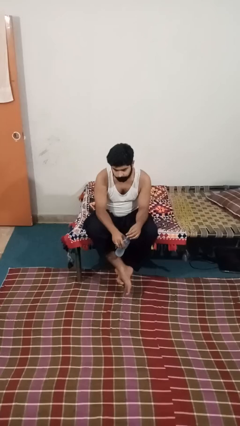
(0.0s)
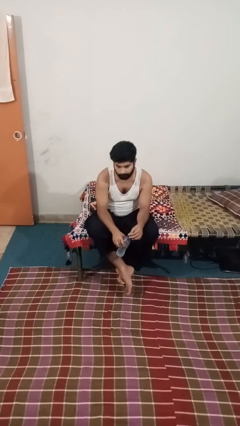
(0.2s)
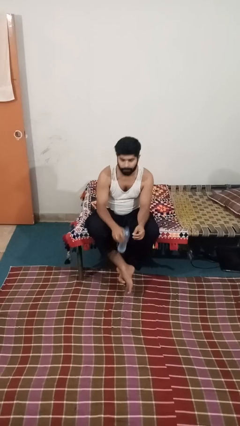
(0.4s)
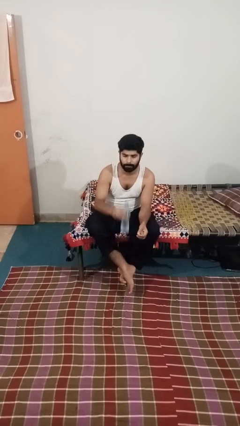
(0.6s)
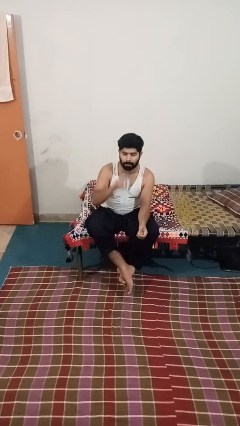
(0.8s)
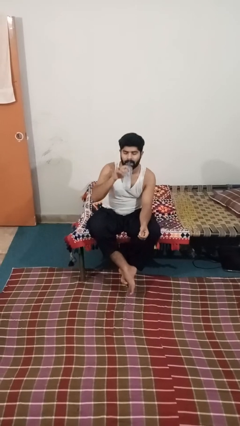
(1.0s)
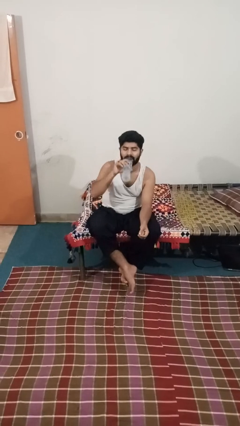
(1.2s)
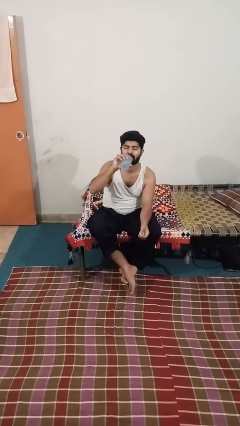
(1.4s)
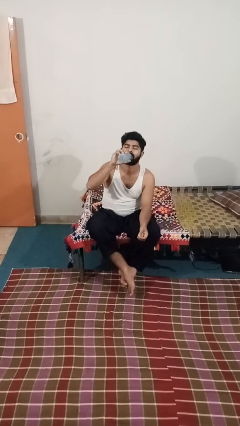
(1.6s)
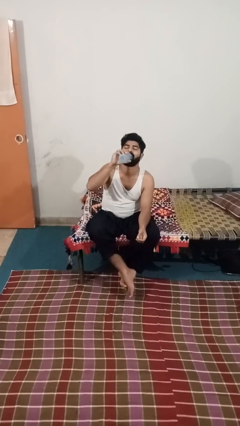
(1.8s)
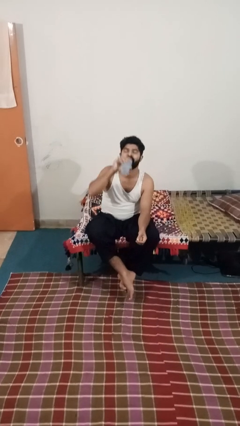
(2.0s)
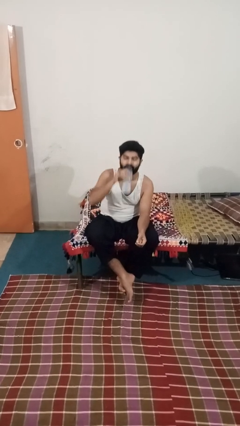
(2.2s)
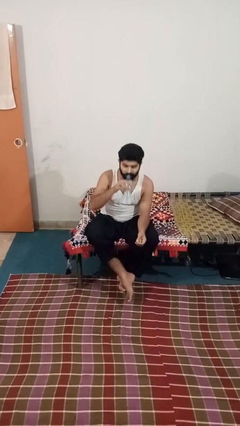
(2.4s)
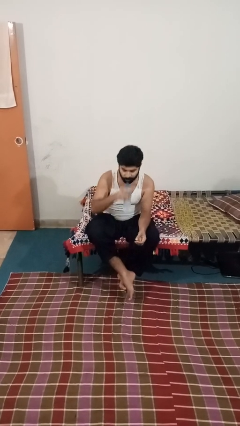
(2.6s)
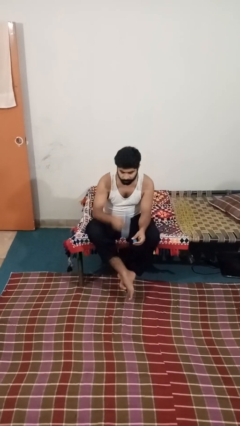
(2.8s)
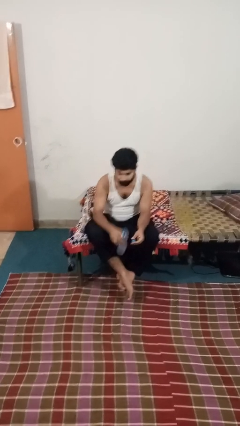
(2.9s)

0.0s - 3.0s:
person drinks from bottle

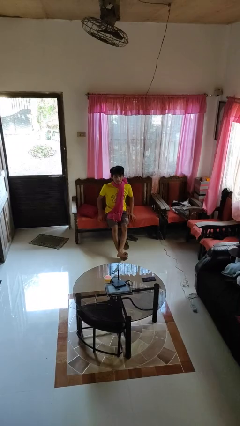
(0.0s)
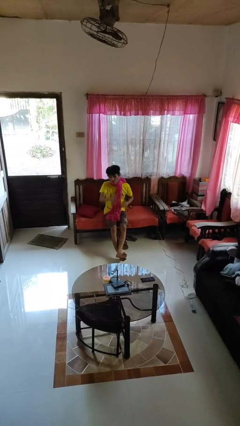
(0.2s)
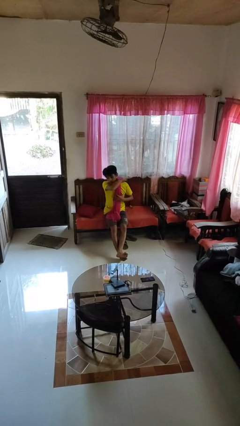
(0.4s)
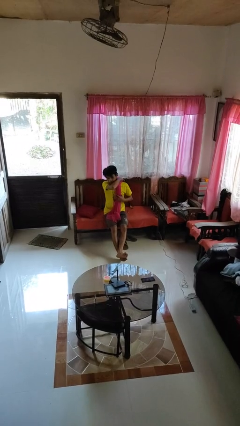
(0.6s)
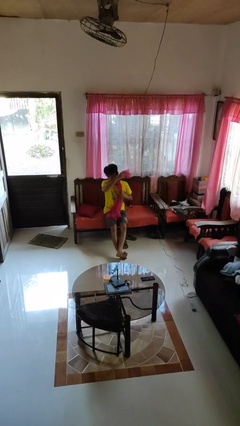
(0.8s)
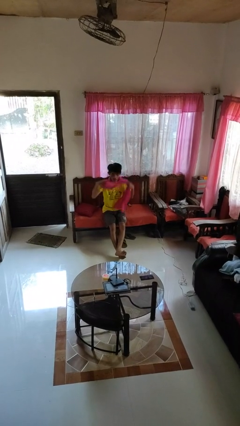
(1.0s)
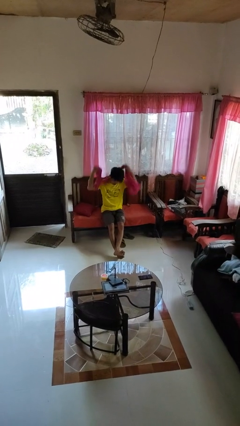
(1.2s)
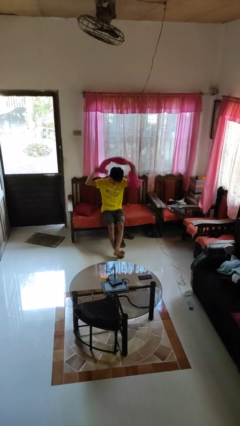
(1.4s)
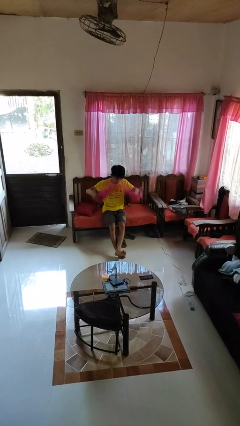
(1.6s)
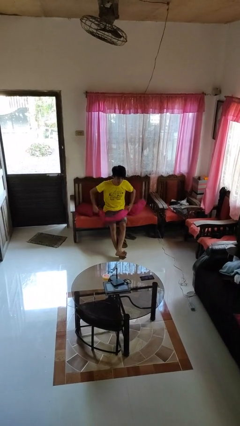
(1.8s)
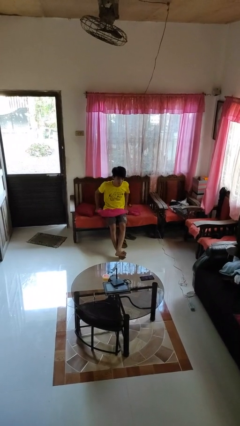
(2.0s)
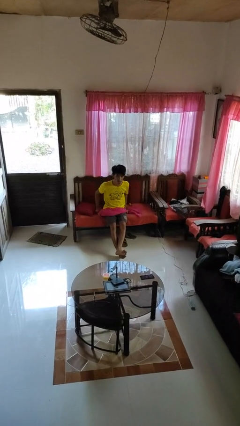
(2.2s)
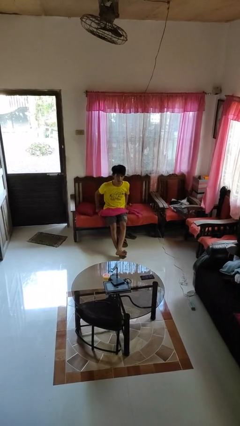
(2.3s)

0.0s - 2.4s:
person takes off scarf

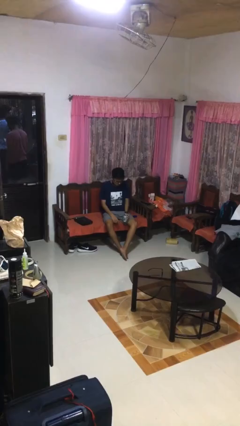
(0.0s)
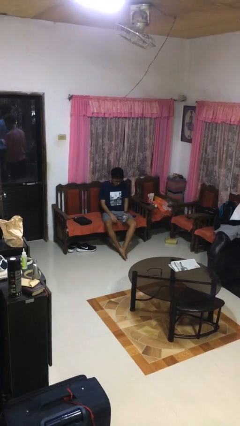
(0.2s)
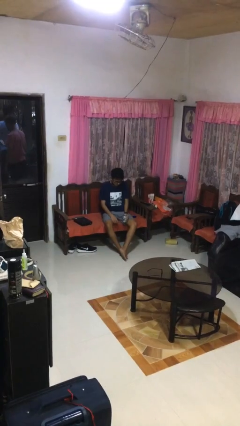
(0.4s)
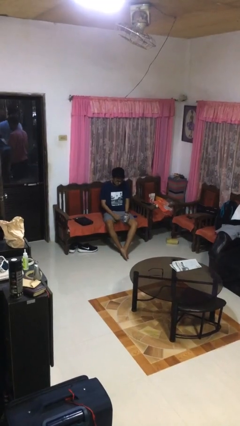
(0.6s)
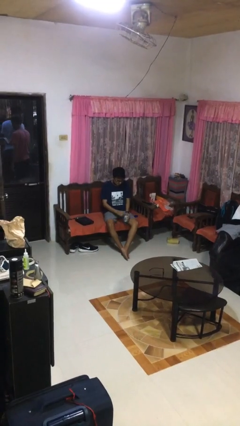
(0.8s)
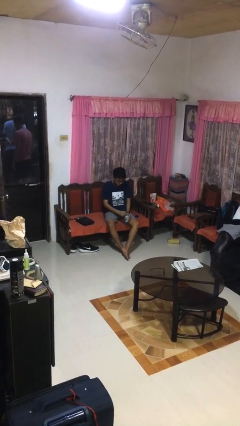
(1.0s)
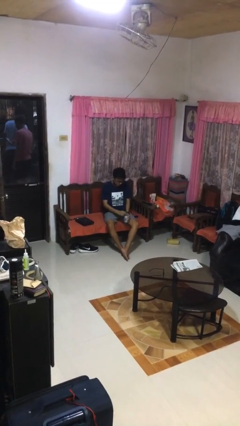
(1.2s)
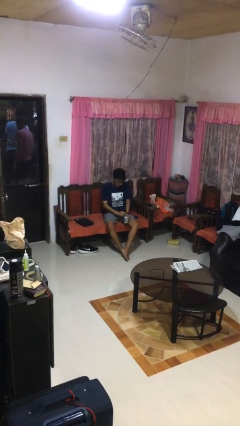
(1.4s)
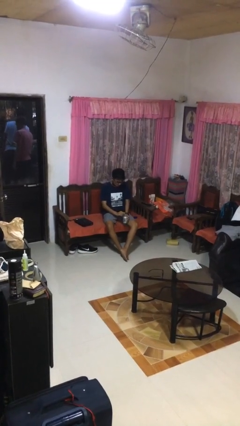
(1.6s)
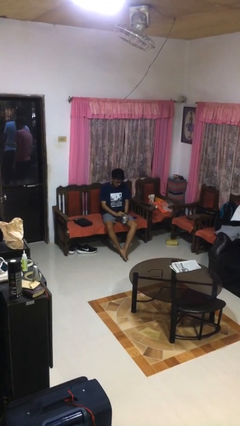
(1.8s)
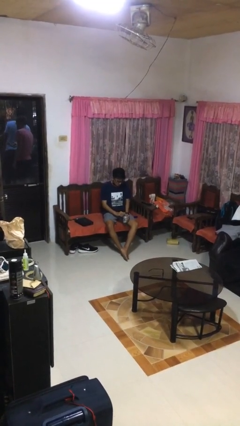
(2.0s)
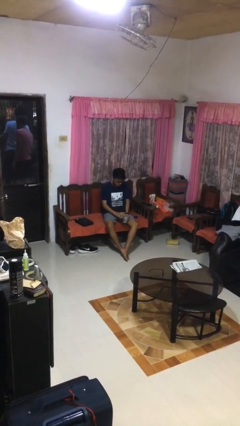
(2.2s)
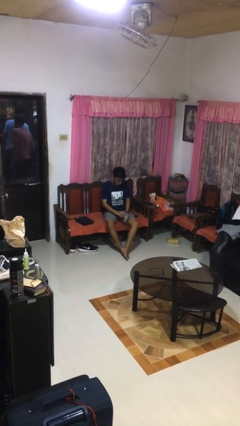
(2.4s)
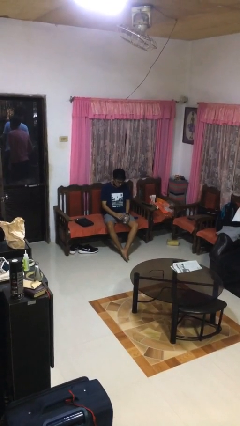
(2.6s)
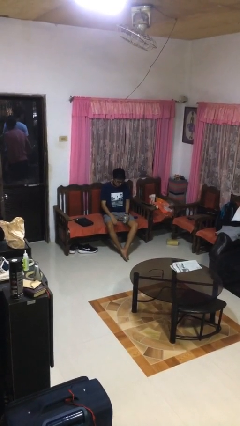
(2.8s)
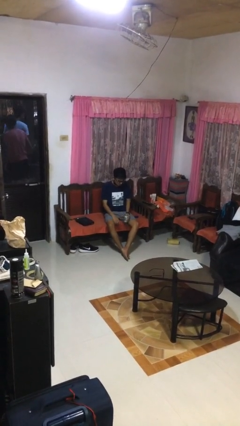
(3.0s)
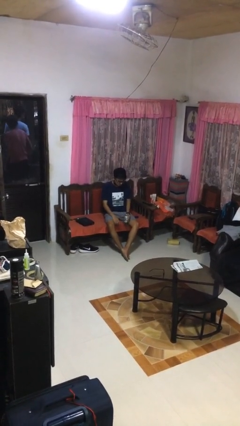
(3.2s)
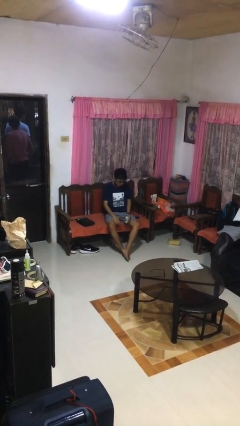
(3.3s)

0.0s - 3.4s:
person opens beverage can

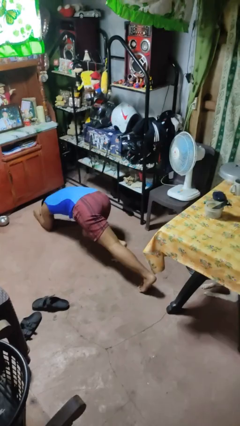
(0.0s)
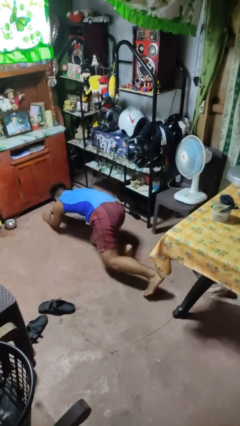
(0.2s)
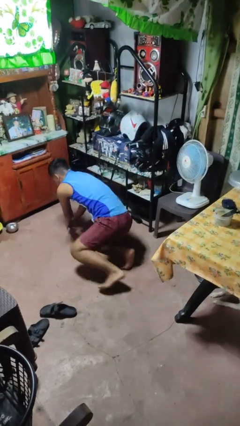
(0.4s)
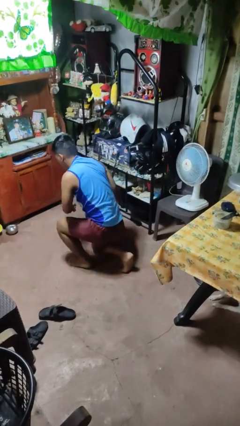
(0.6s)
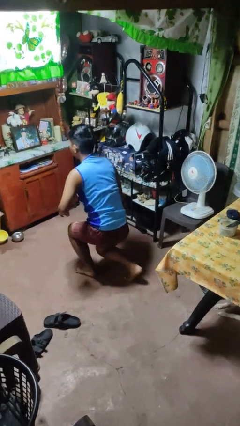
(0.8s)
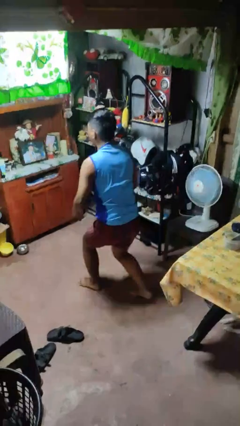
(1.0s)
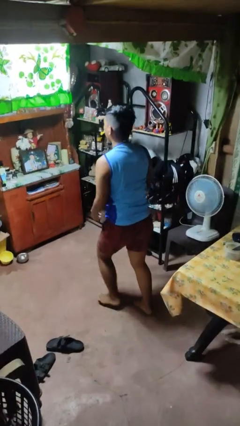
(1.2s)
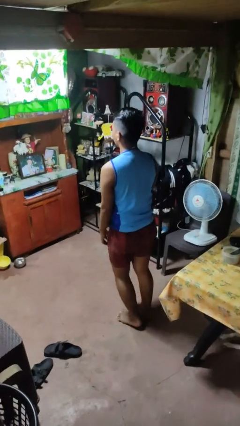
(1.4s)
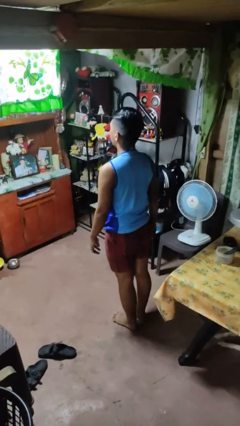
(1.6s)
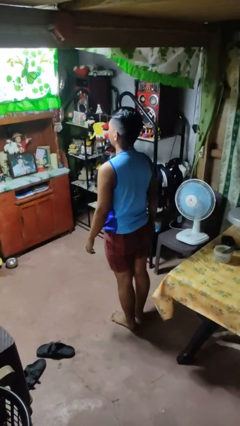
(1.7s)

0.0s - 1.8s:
person stands up from floor

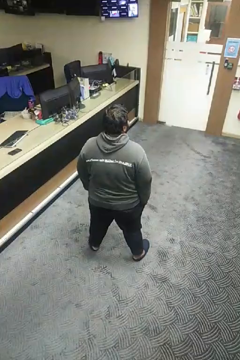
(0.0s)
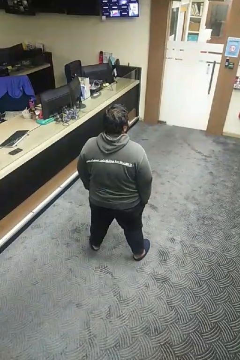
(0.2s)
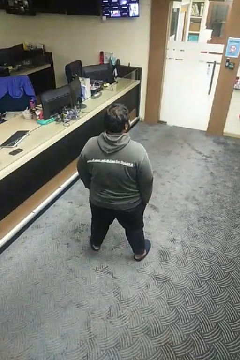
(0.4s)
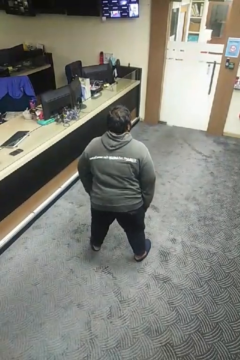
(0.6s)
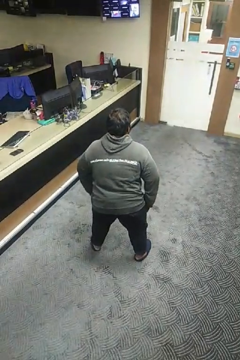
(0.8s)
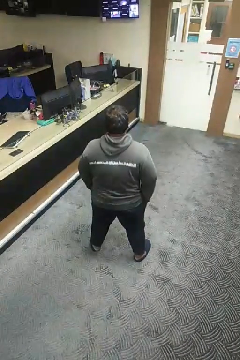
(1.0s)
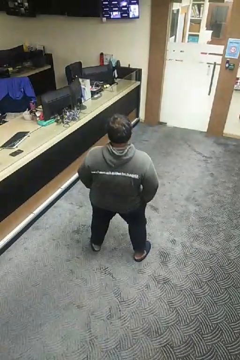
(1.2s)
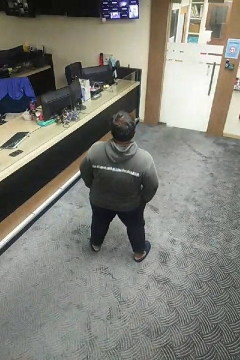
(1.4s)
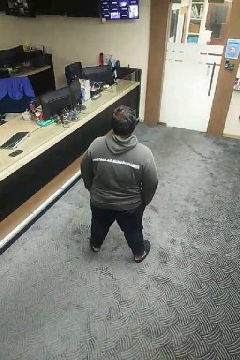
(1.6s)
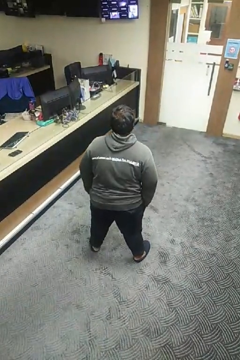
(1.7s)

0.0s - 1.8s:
person wiggles hips

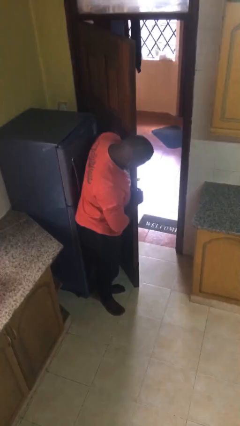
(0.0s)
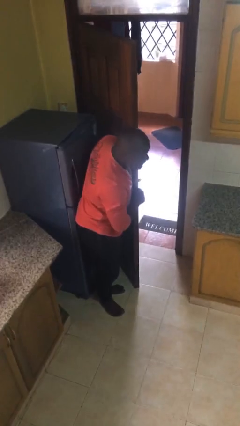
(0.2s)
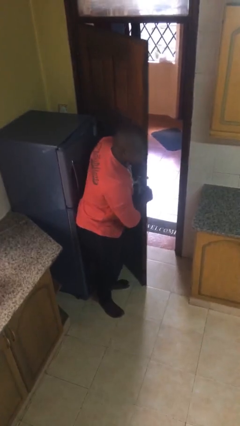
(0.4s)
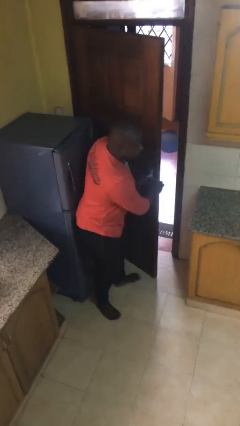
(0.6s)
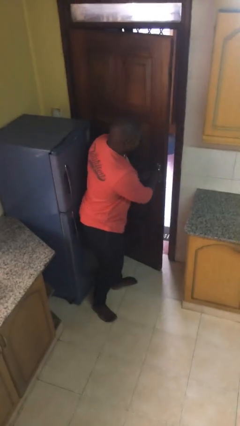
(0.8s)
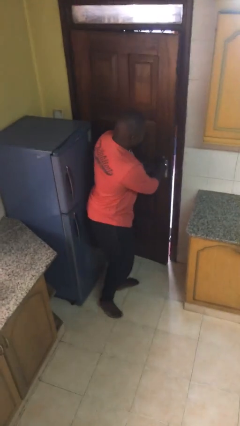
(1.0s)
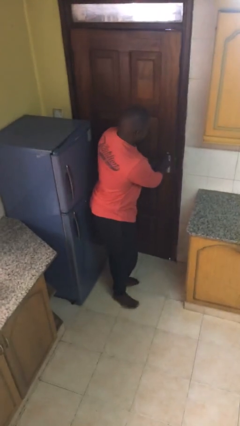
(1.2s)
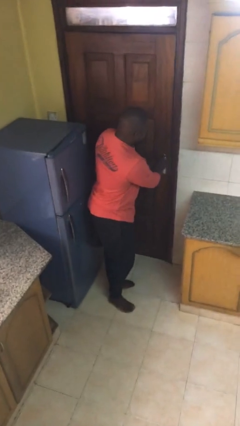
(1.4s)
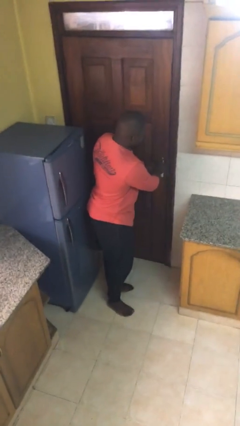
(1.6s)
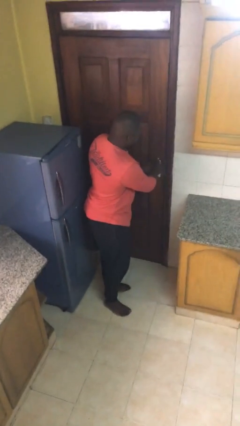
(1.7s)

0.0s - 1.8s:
person closes facility door

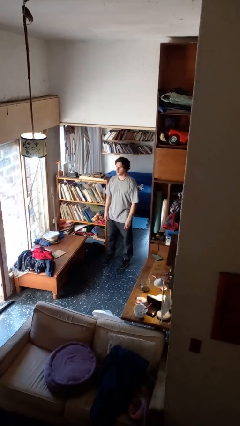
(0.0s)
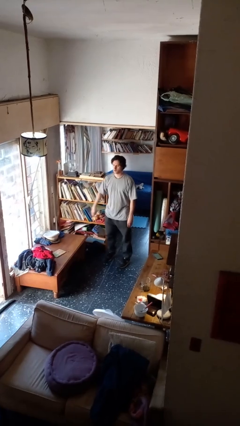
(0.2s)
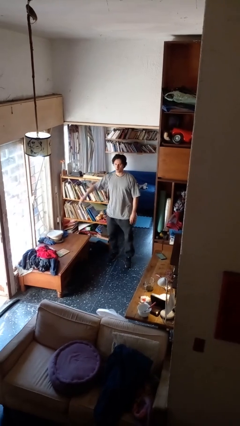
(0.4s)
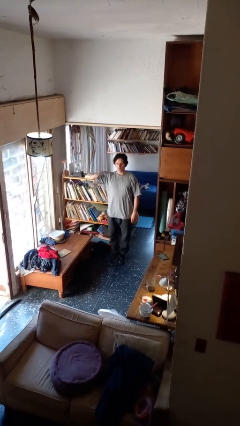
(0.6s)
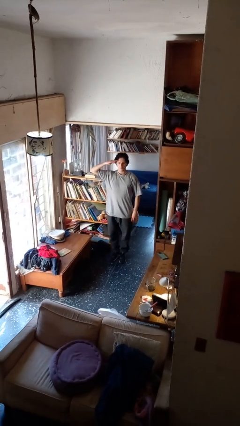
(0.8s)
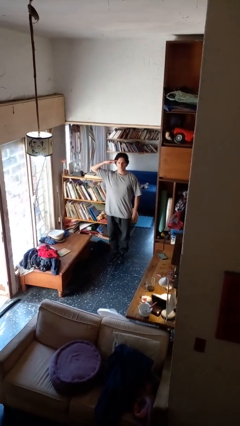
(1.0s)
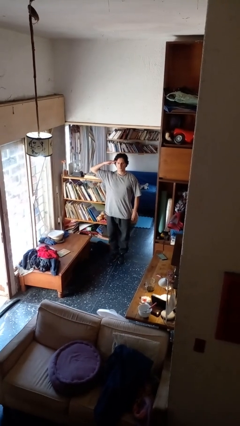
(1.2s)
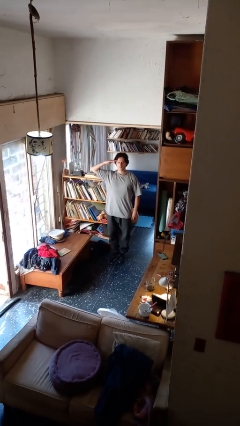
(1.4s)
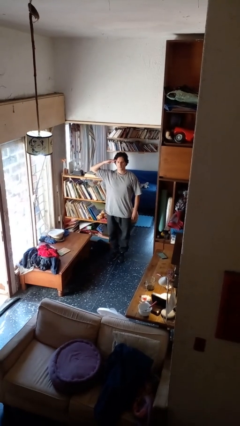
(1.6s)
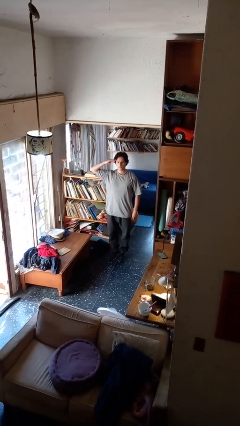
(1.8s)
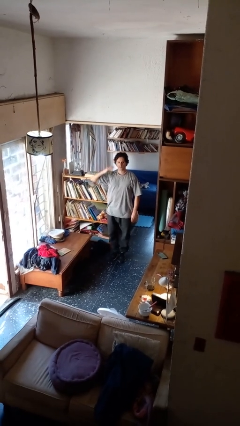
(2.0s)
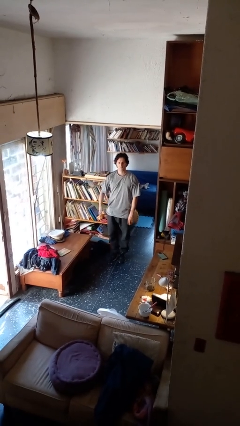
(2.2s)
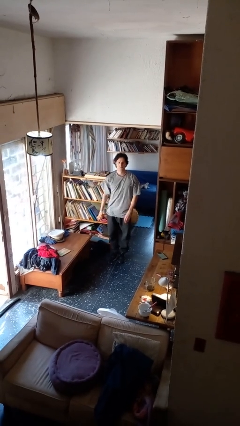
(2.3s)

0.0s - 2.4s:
person salutes

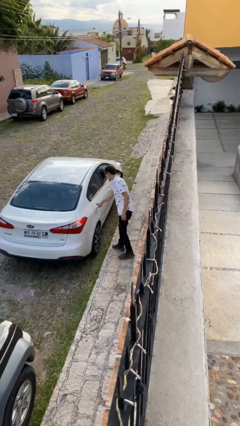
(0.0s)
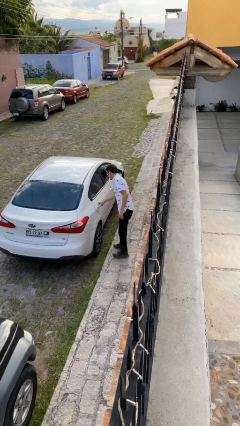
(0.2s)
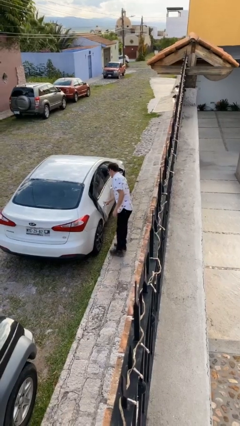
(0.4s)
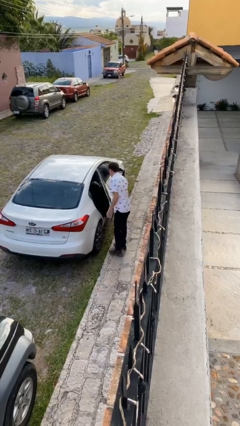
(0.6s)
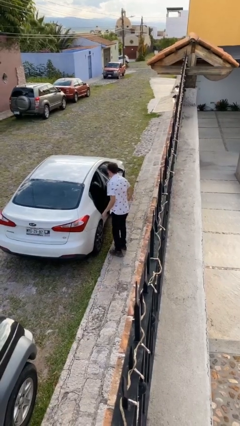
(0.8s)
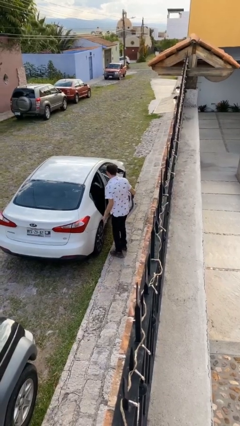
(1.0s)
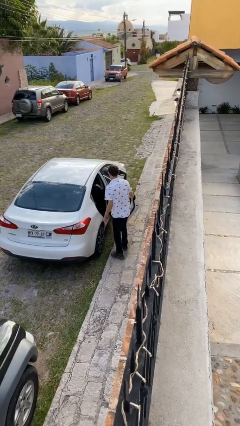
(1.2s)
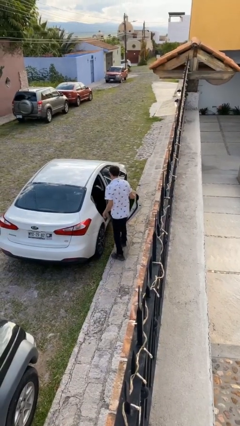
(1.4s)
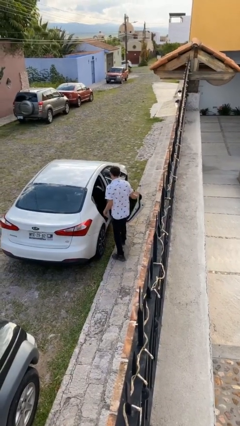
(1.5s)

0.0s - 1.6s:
person opens car door
